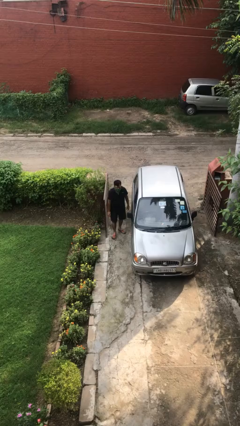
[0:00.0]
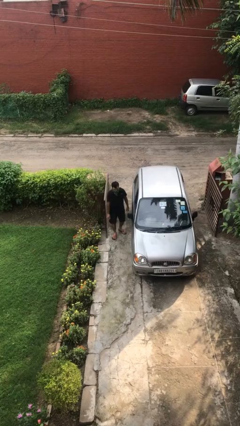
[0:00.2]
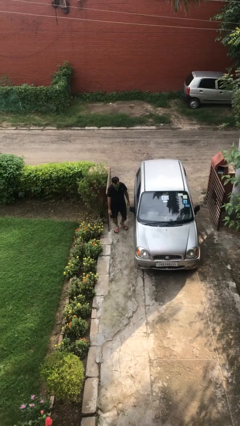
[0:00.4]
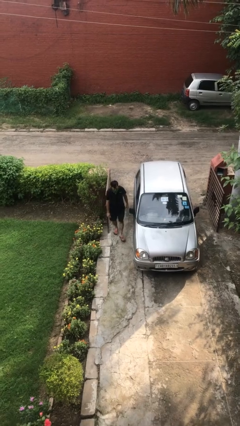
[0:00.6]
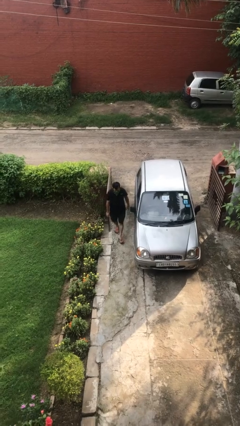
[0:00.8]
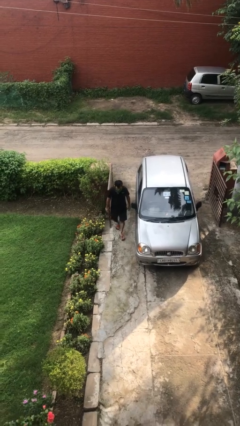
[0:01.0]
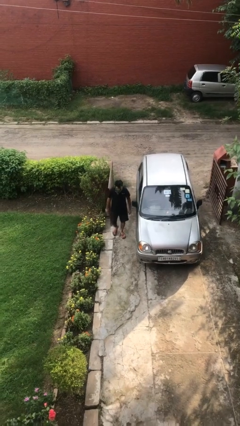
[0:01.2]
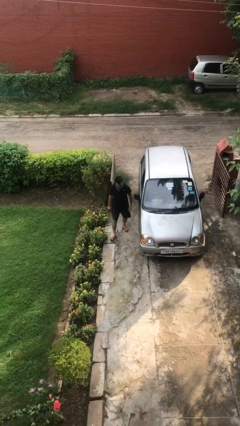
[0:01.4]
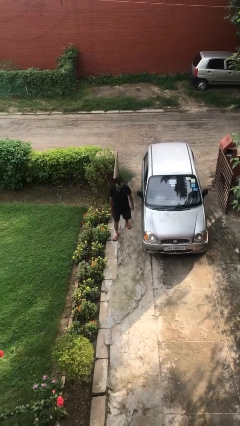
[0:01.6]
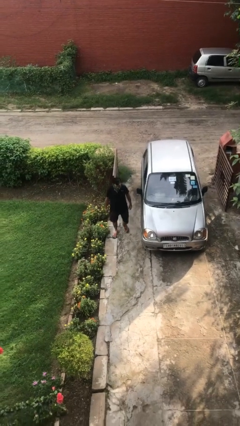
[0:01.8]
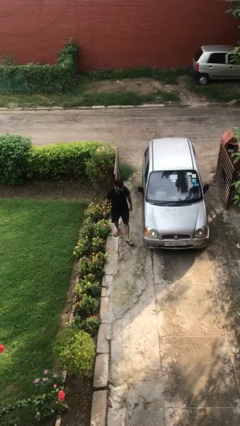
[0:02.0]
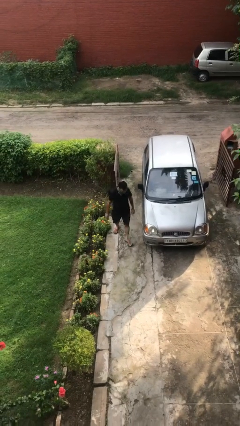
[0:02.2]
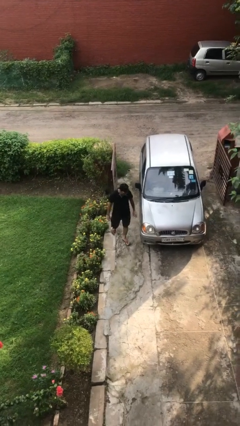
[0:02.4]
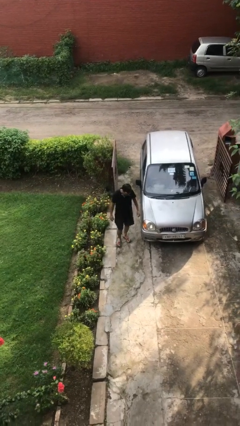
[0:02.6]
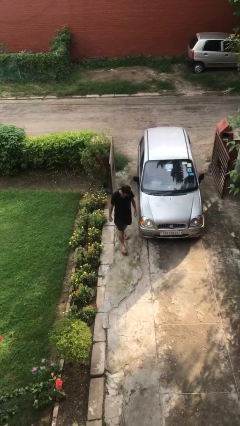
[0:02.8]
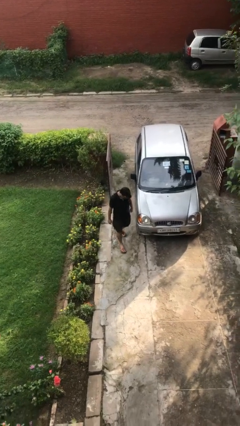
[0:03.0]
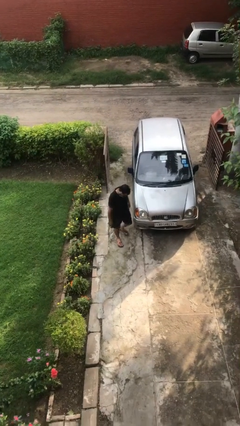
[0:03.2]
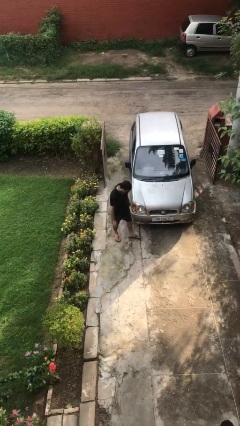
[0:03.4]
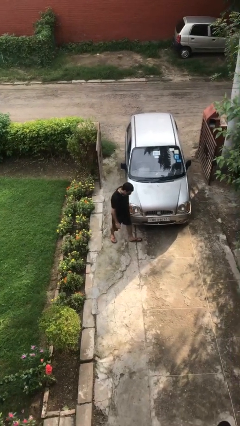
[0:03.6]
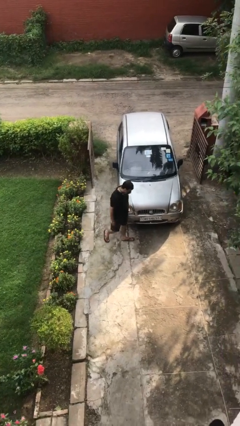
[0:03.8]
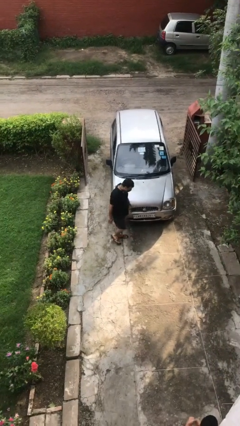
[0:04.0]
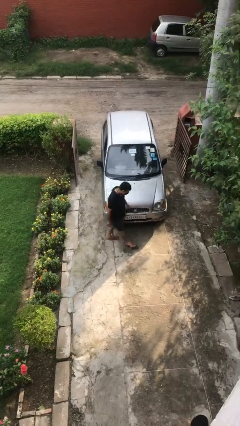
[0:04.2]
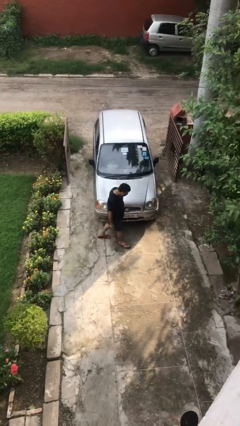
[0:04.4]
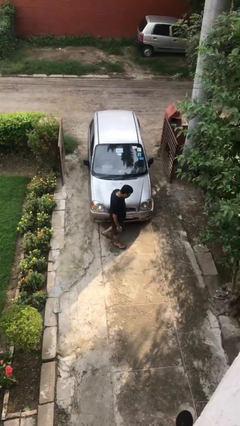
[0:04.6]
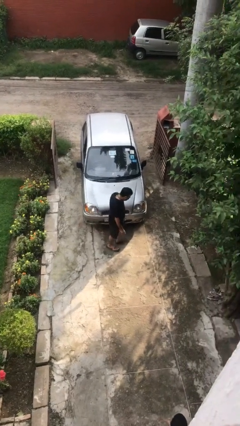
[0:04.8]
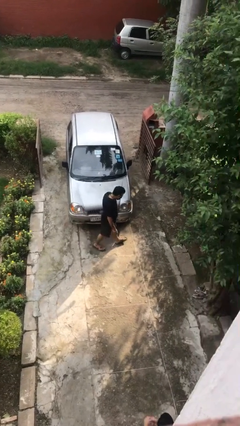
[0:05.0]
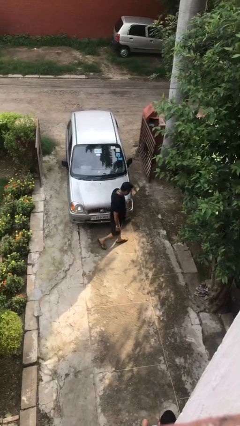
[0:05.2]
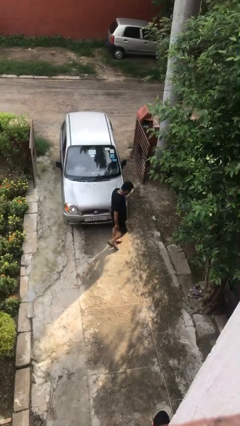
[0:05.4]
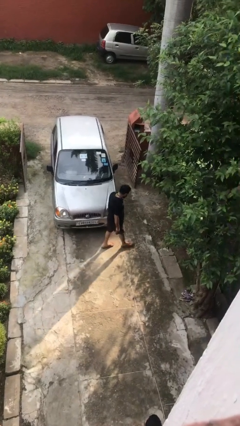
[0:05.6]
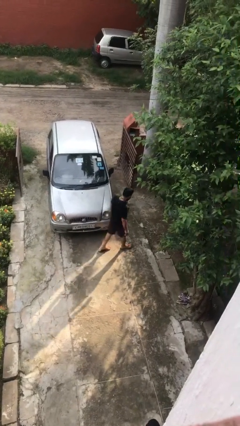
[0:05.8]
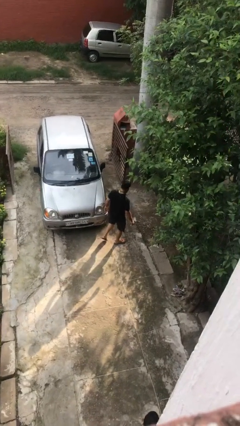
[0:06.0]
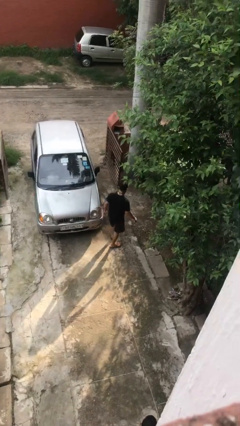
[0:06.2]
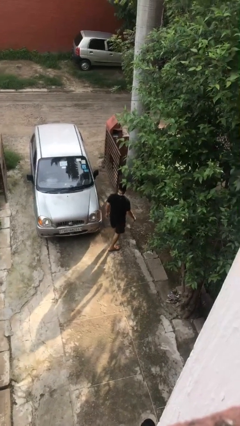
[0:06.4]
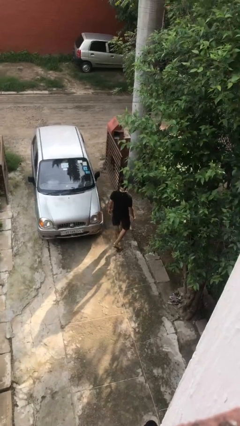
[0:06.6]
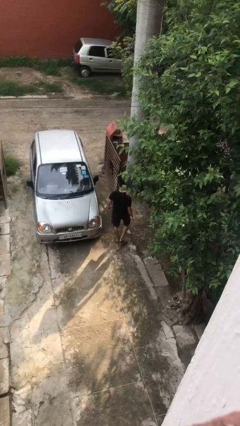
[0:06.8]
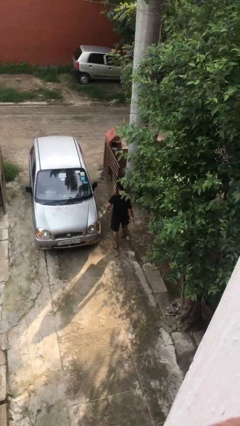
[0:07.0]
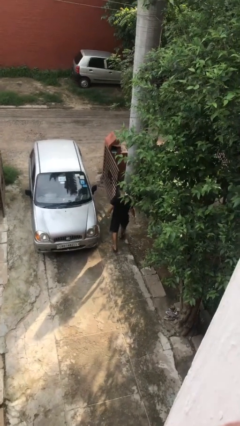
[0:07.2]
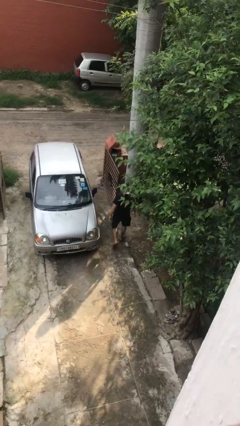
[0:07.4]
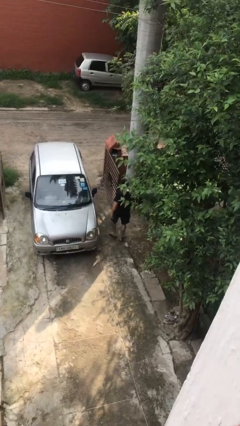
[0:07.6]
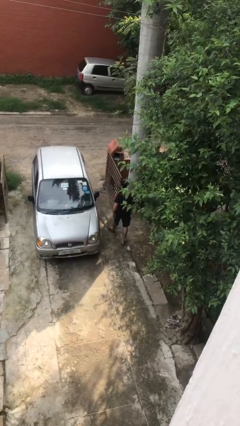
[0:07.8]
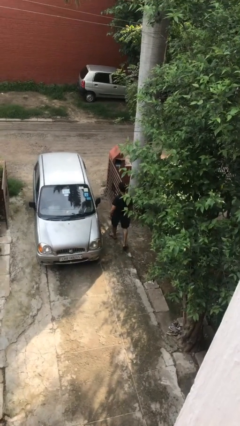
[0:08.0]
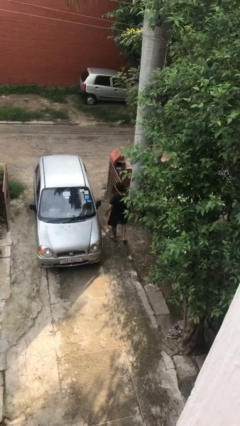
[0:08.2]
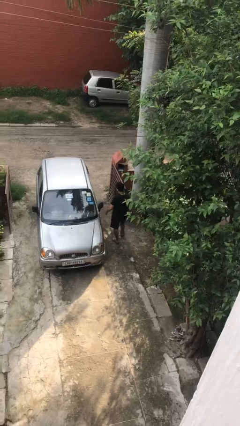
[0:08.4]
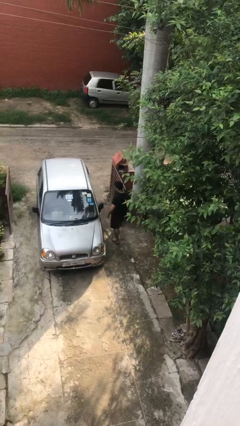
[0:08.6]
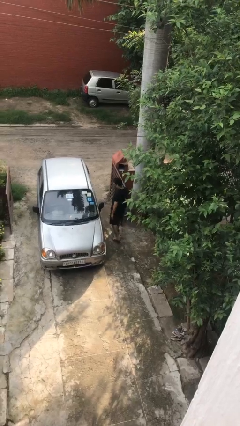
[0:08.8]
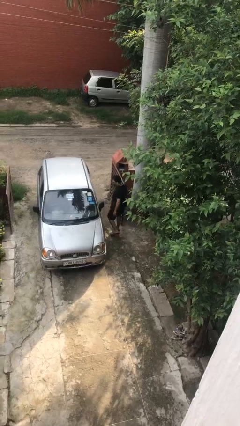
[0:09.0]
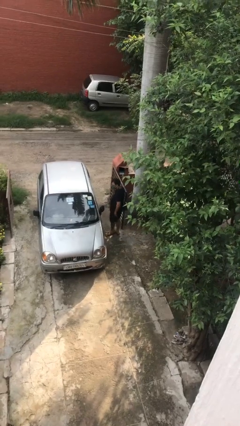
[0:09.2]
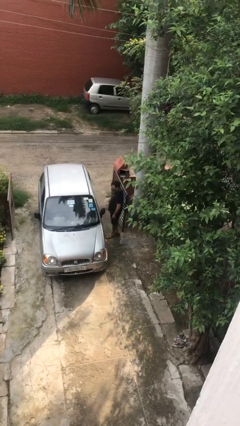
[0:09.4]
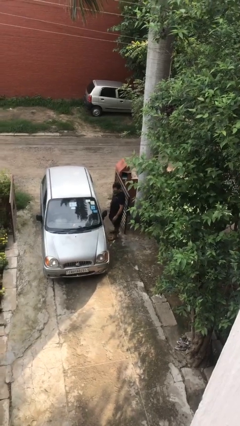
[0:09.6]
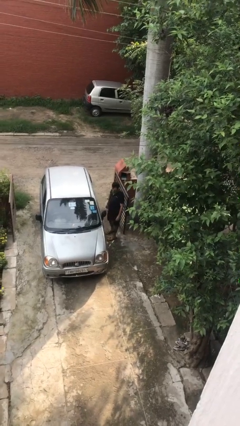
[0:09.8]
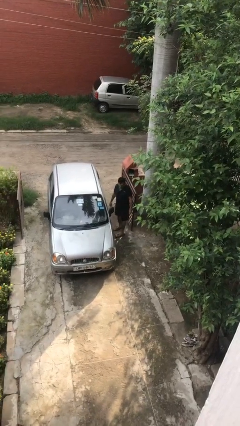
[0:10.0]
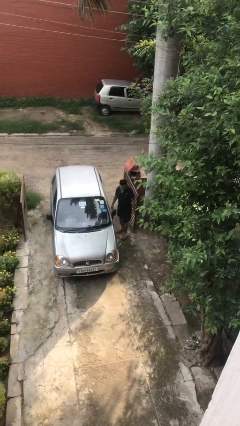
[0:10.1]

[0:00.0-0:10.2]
person walks around car

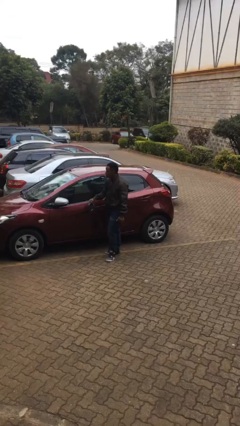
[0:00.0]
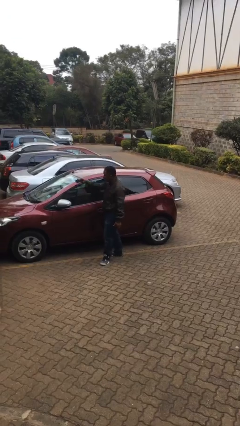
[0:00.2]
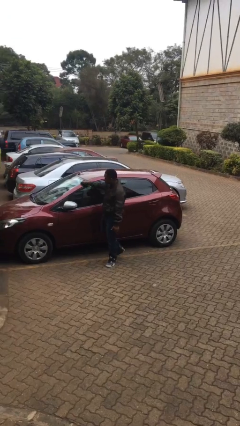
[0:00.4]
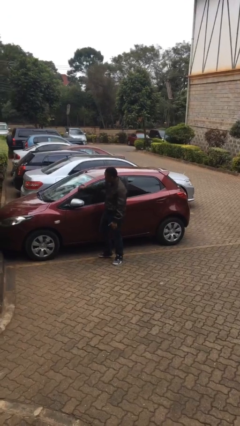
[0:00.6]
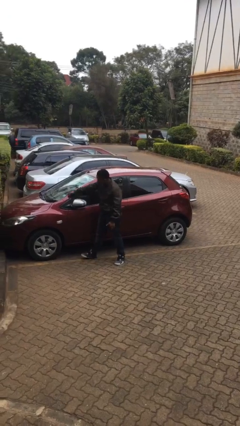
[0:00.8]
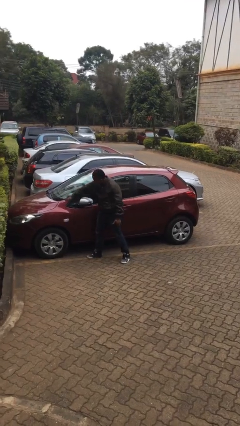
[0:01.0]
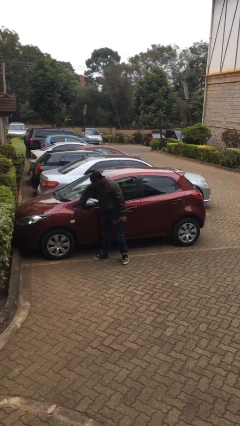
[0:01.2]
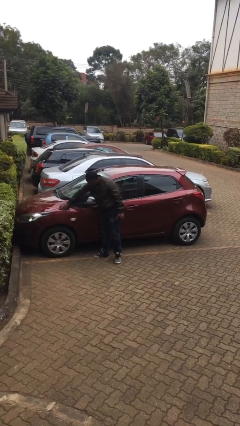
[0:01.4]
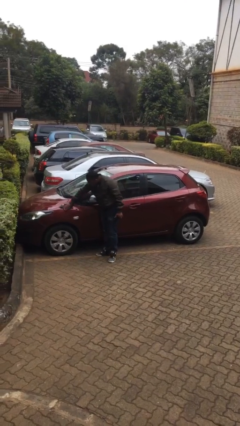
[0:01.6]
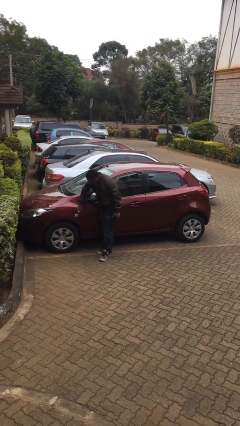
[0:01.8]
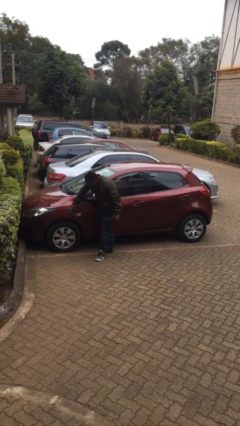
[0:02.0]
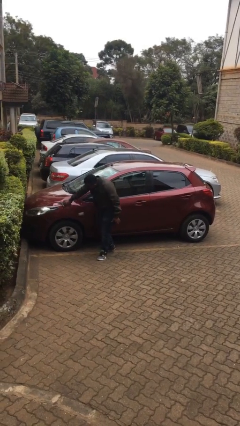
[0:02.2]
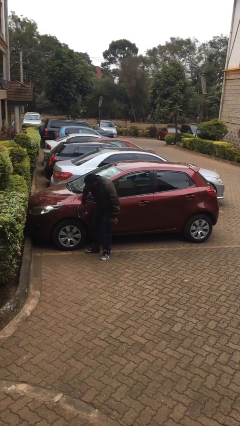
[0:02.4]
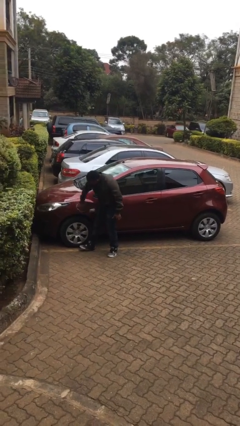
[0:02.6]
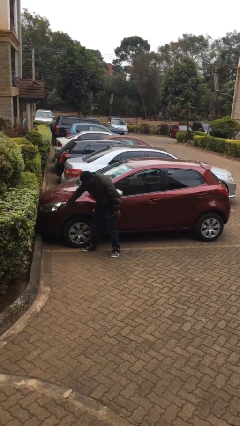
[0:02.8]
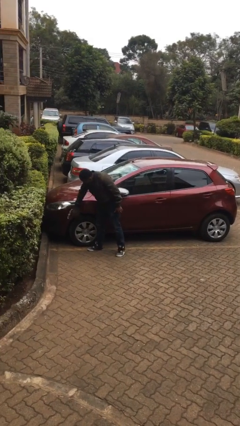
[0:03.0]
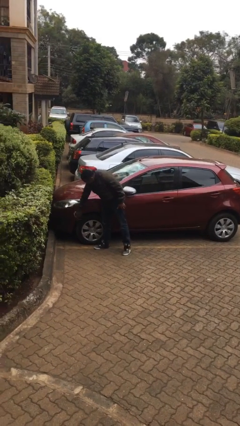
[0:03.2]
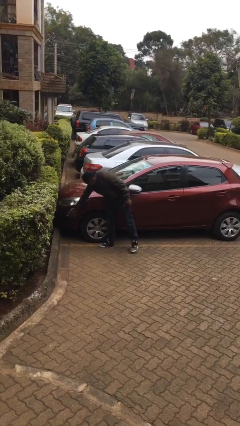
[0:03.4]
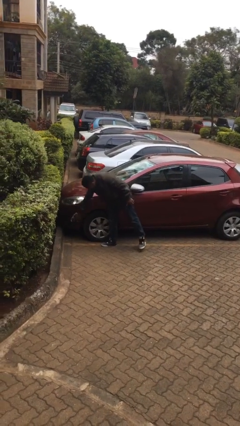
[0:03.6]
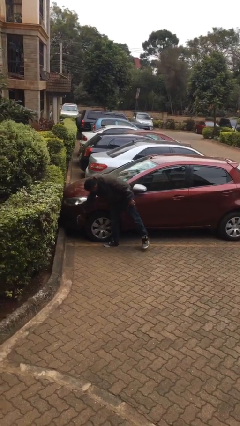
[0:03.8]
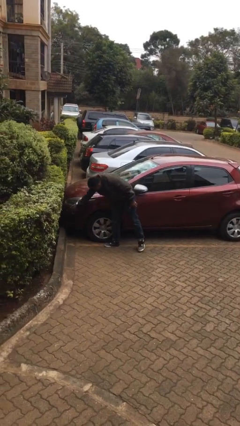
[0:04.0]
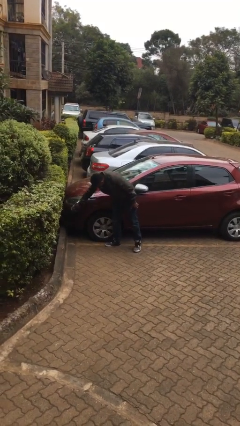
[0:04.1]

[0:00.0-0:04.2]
person polishes car with rag

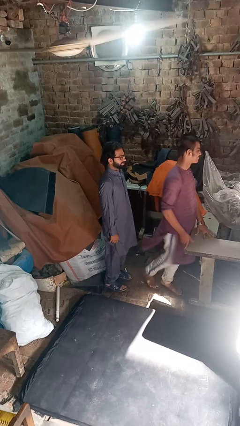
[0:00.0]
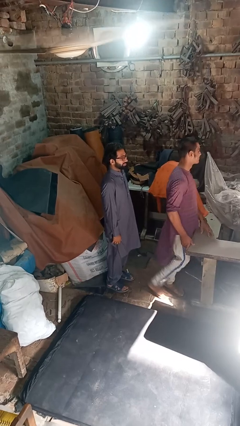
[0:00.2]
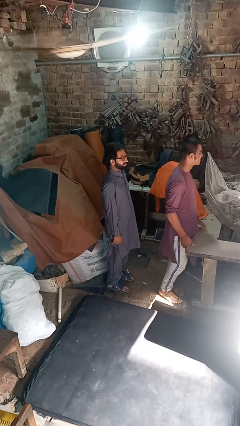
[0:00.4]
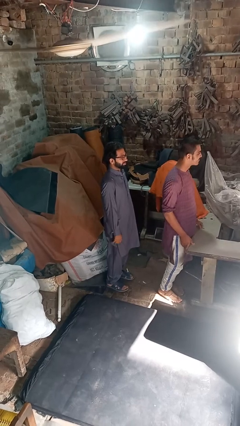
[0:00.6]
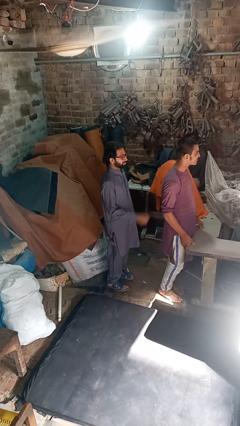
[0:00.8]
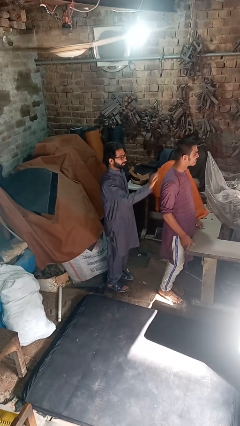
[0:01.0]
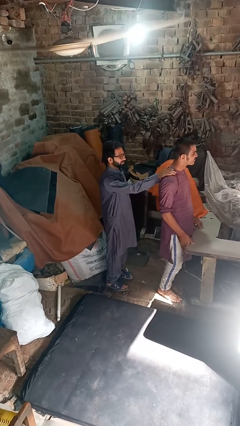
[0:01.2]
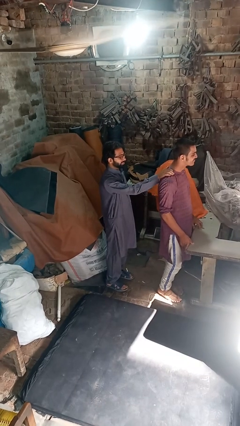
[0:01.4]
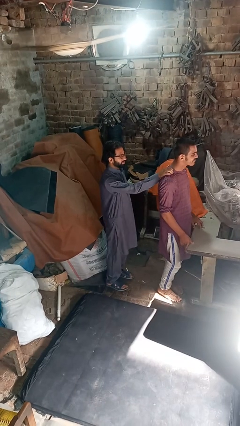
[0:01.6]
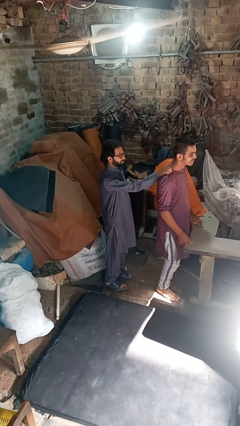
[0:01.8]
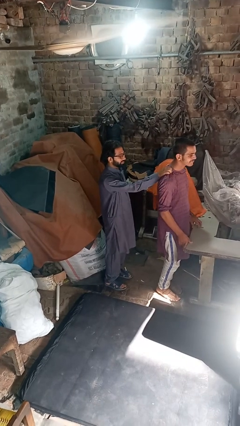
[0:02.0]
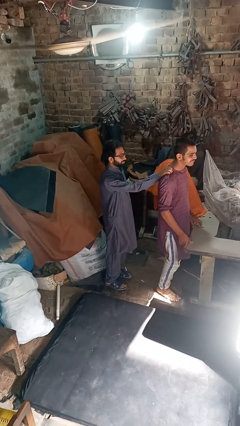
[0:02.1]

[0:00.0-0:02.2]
person grabs person by shoulder

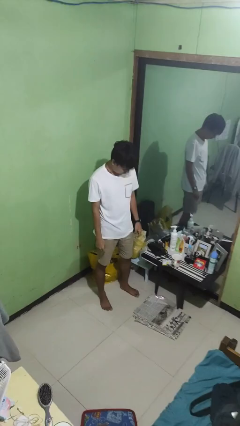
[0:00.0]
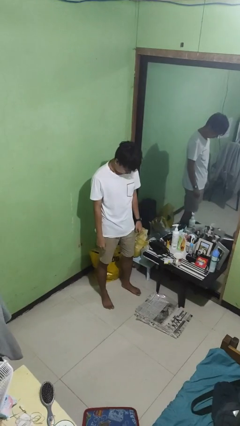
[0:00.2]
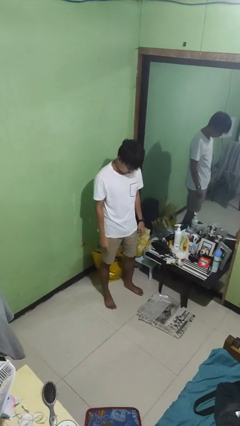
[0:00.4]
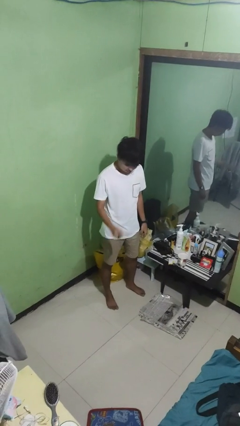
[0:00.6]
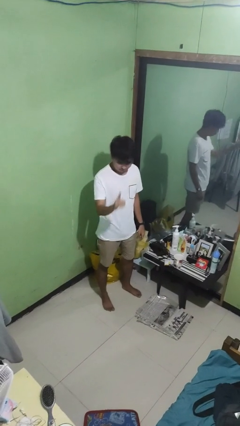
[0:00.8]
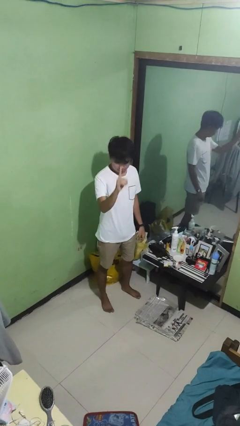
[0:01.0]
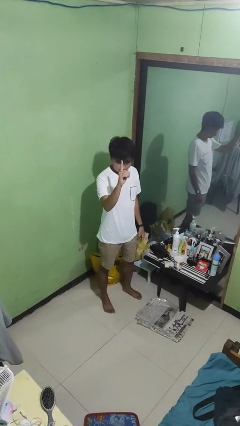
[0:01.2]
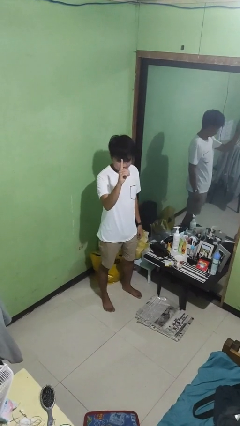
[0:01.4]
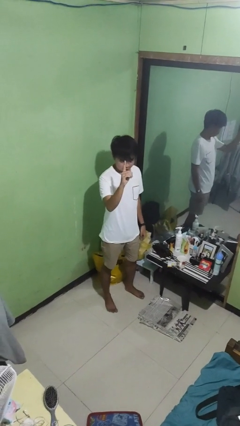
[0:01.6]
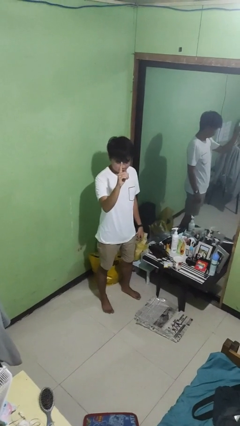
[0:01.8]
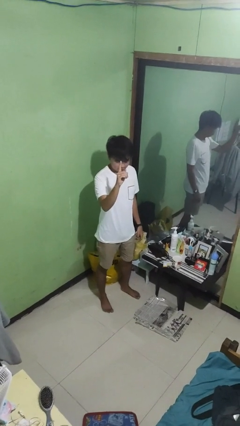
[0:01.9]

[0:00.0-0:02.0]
person gestures number one
